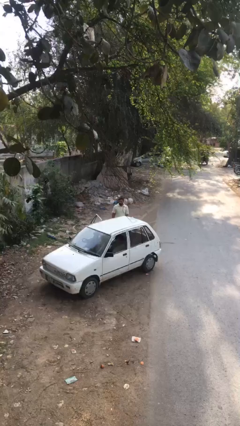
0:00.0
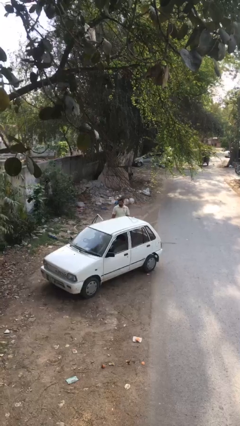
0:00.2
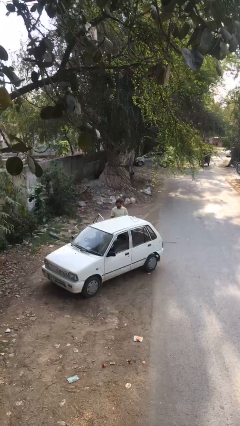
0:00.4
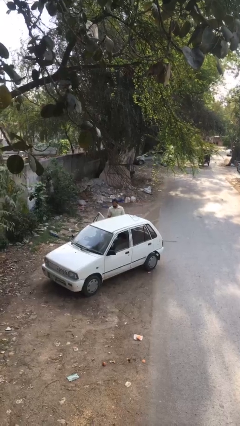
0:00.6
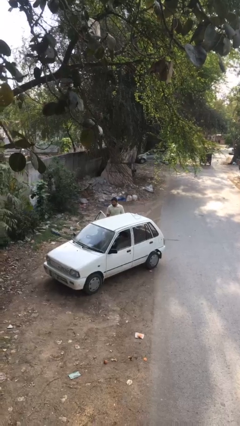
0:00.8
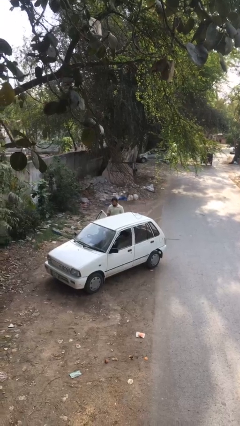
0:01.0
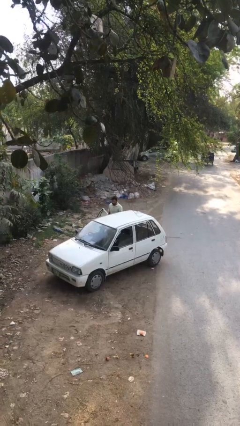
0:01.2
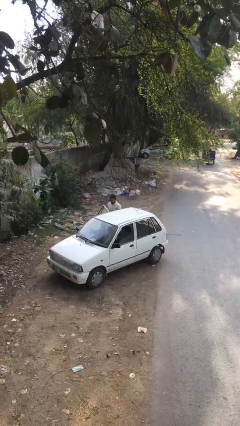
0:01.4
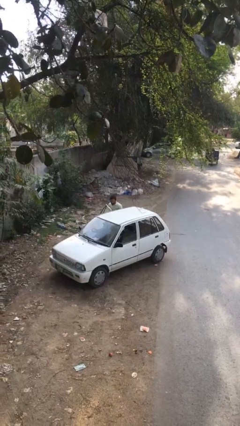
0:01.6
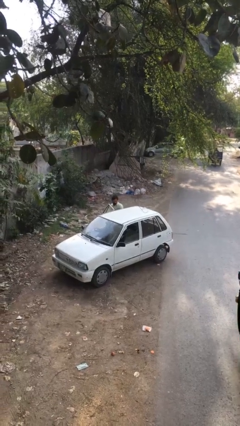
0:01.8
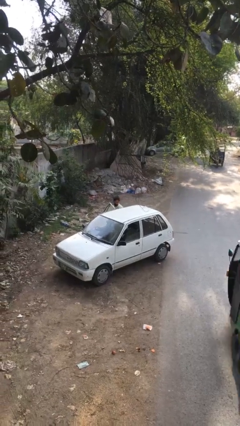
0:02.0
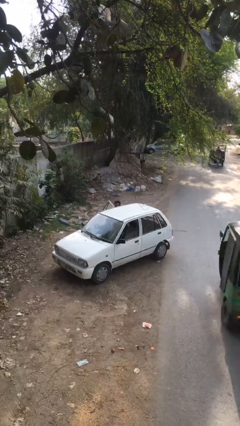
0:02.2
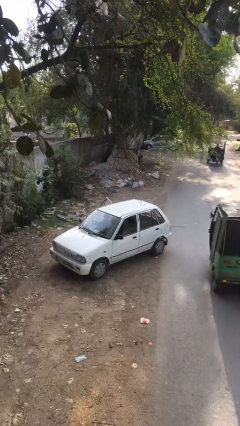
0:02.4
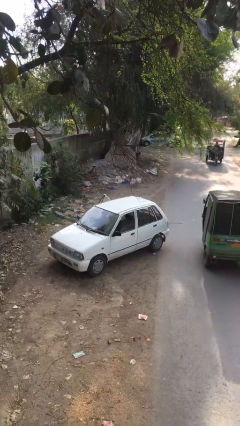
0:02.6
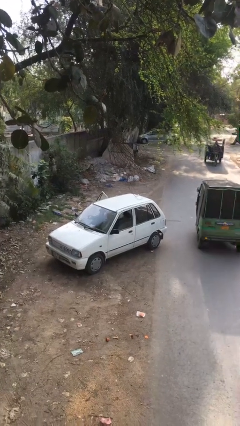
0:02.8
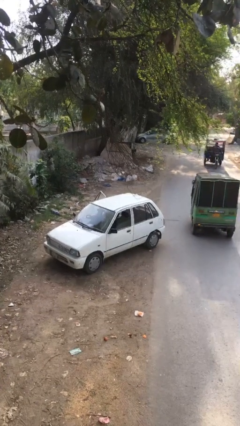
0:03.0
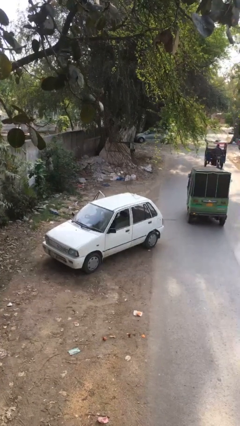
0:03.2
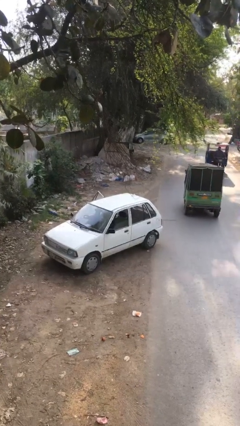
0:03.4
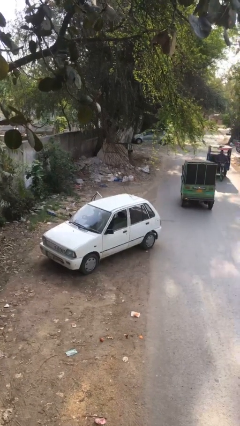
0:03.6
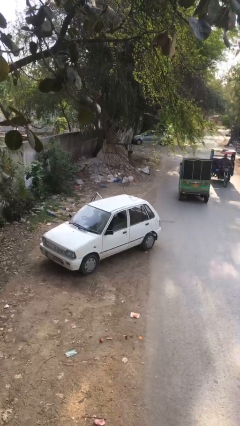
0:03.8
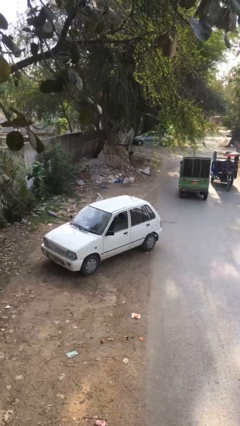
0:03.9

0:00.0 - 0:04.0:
person enters car

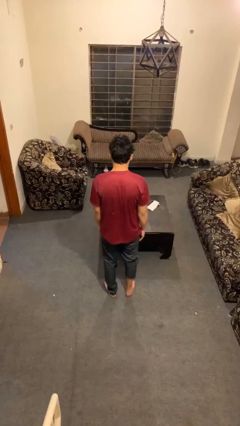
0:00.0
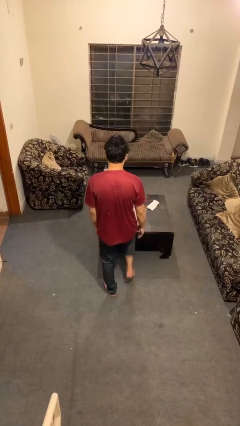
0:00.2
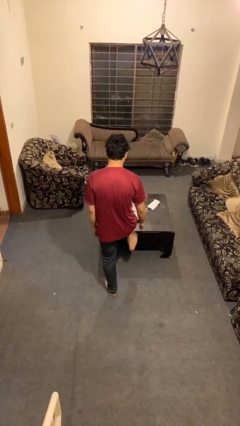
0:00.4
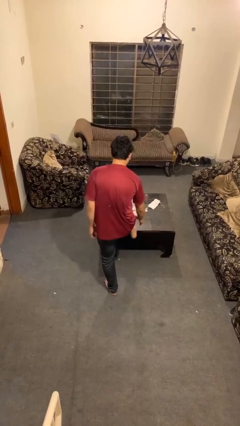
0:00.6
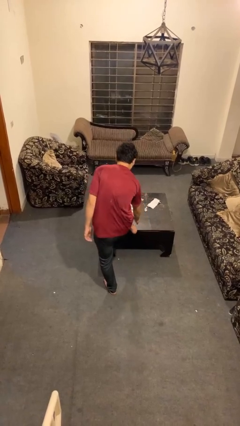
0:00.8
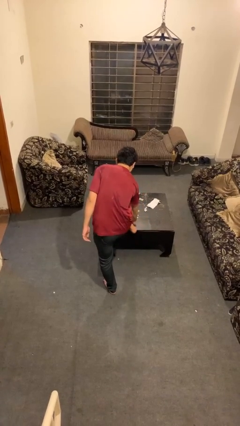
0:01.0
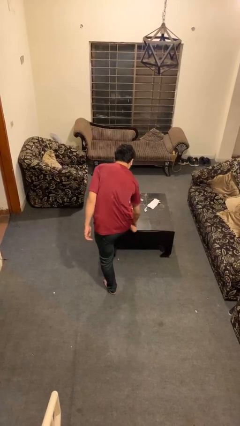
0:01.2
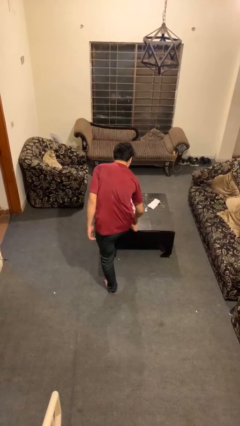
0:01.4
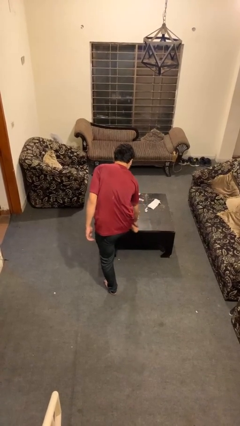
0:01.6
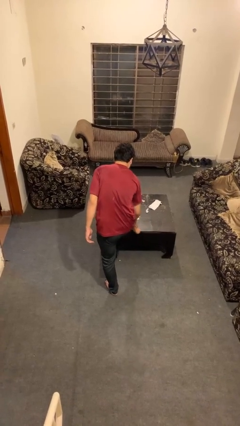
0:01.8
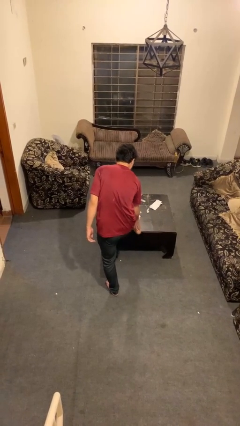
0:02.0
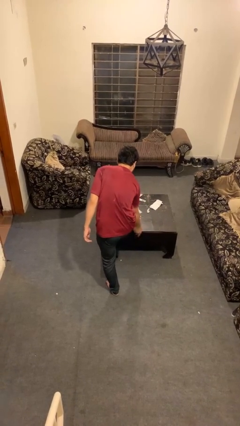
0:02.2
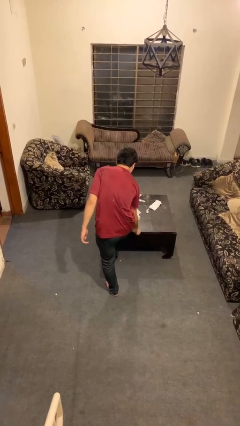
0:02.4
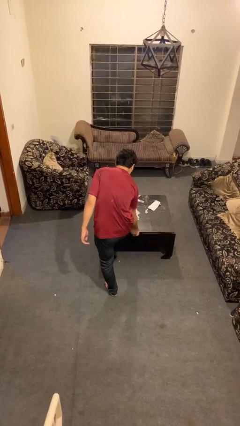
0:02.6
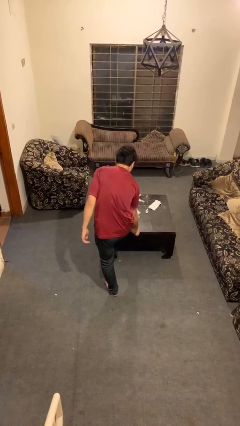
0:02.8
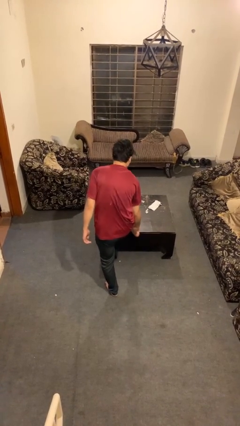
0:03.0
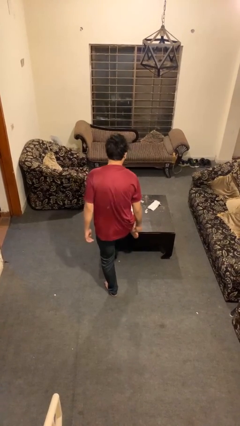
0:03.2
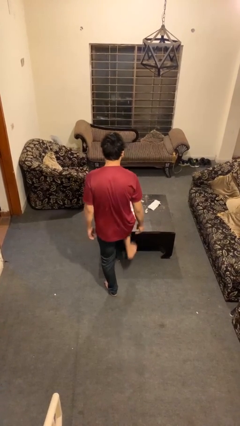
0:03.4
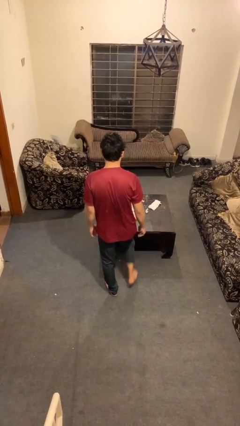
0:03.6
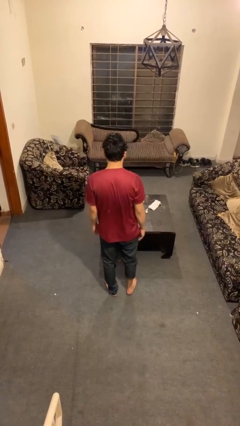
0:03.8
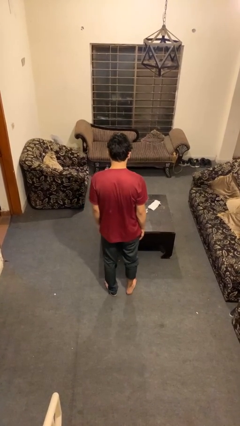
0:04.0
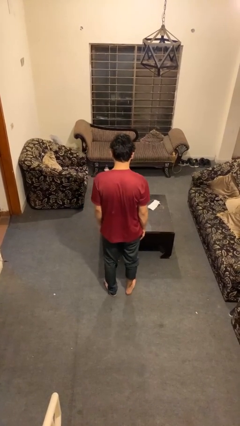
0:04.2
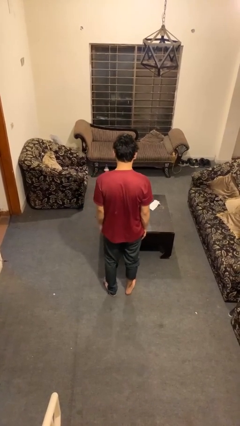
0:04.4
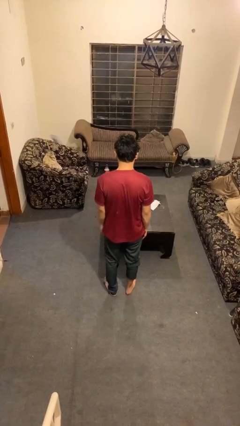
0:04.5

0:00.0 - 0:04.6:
person rubs foot

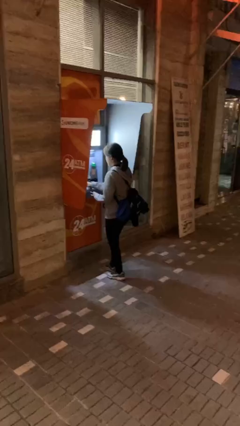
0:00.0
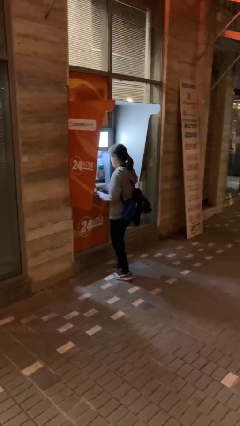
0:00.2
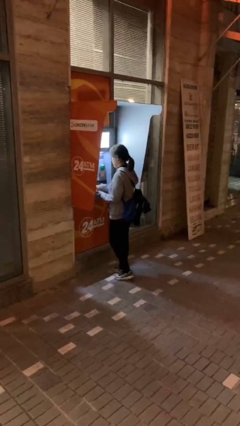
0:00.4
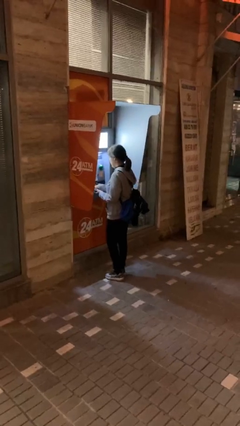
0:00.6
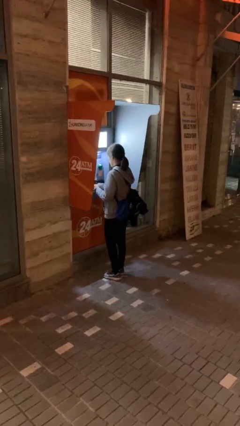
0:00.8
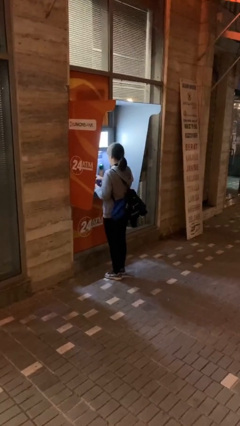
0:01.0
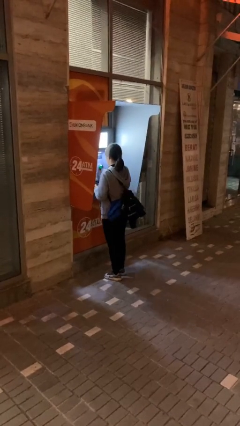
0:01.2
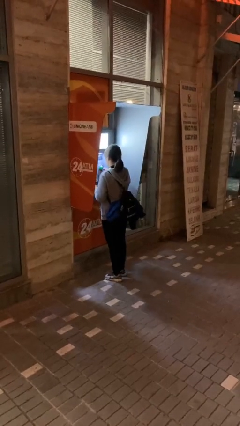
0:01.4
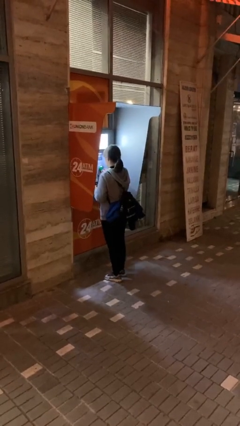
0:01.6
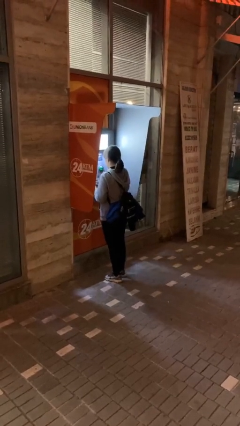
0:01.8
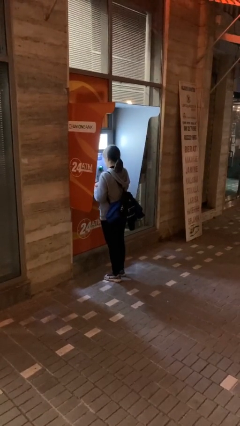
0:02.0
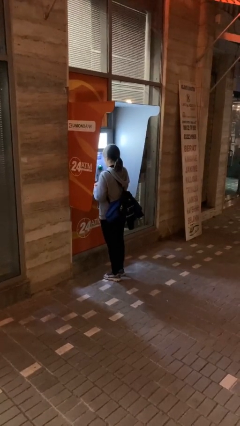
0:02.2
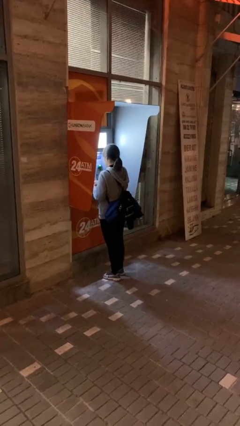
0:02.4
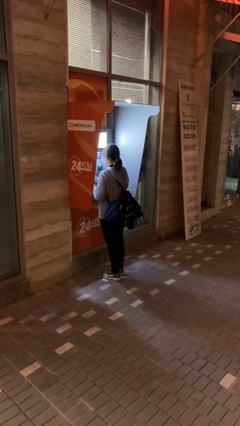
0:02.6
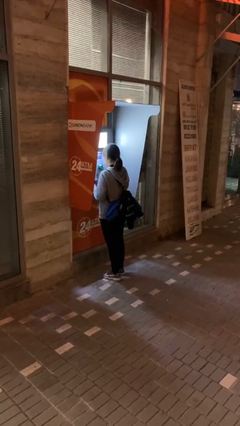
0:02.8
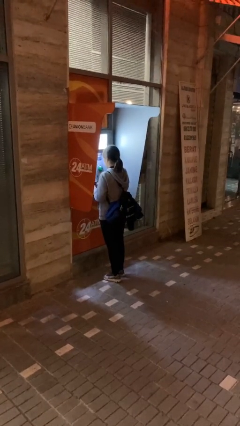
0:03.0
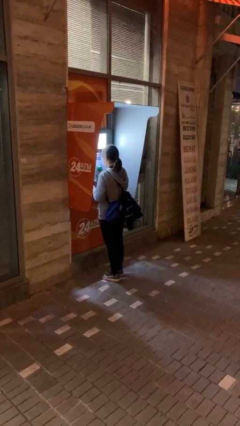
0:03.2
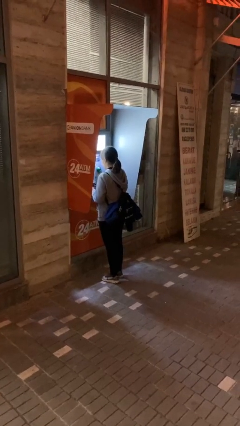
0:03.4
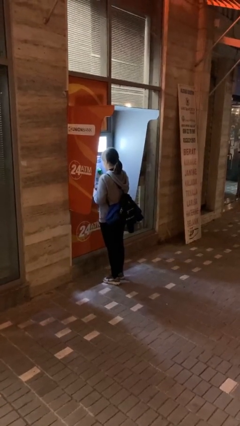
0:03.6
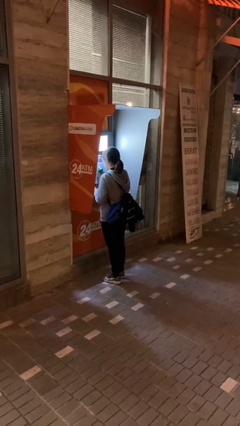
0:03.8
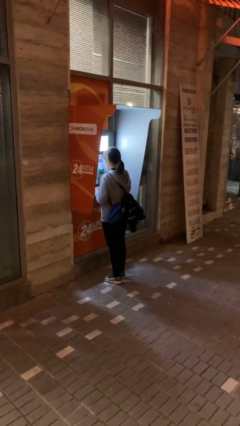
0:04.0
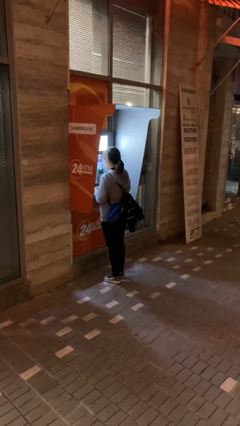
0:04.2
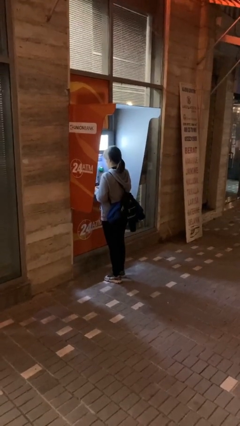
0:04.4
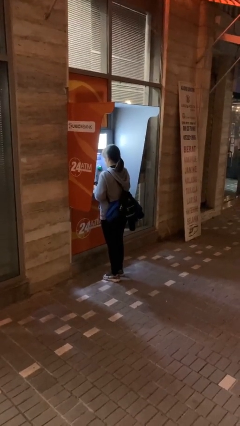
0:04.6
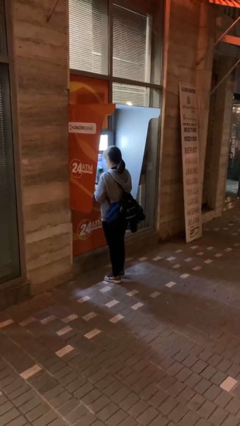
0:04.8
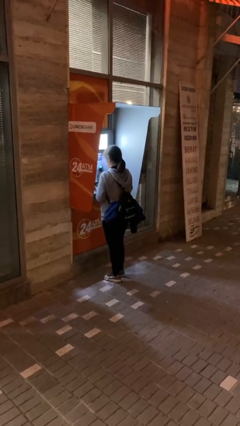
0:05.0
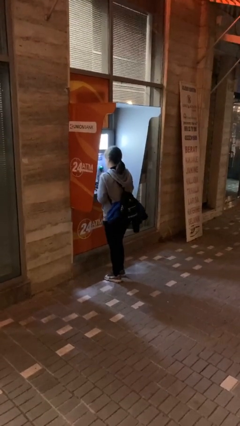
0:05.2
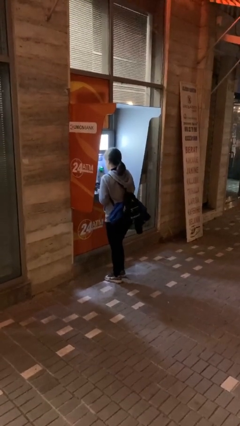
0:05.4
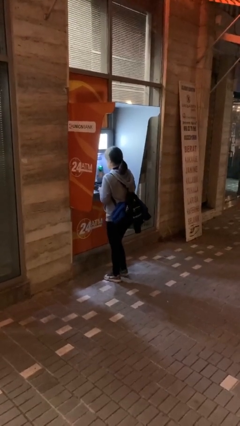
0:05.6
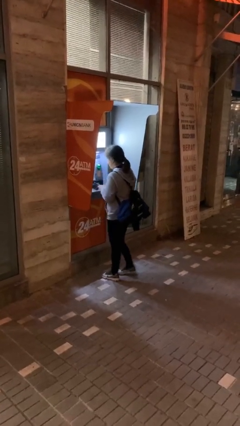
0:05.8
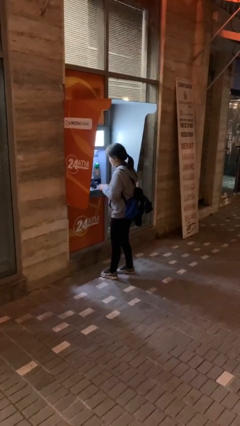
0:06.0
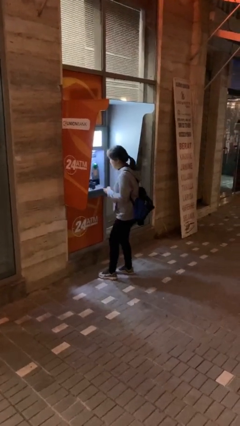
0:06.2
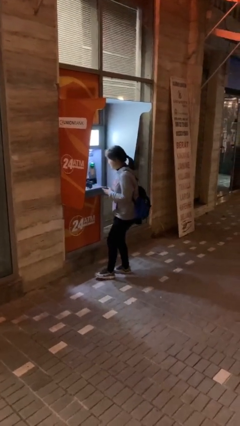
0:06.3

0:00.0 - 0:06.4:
person purchases from machine

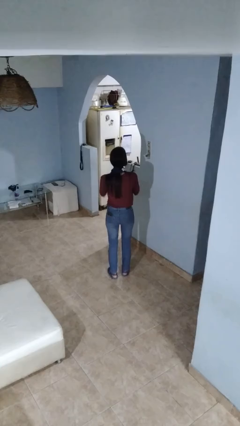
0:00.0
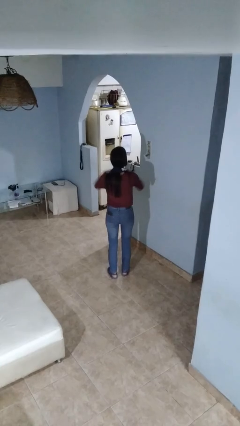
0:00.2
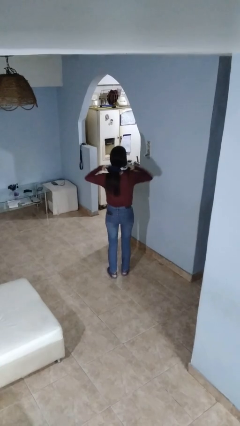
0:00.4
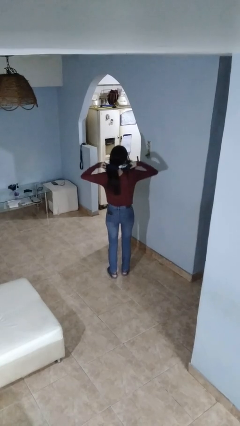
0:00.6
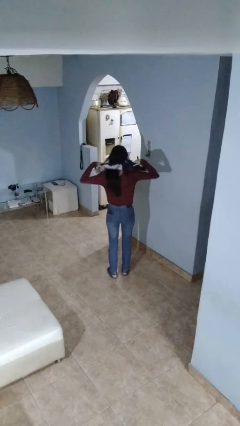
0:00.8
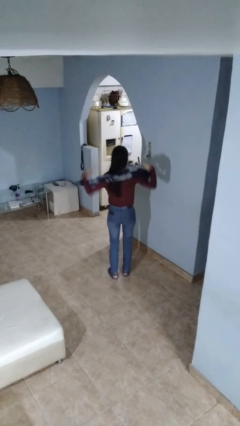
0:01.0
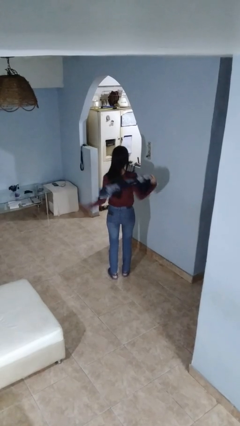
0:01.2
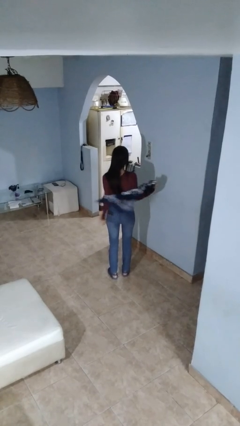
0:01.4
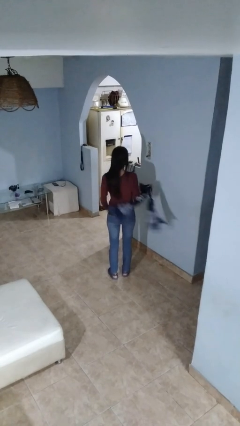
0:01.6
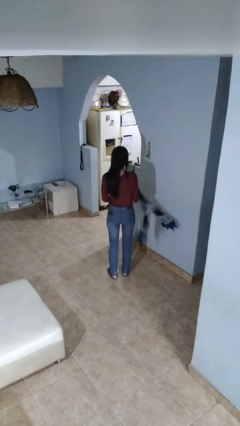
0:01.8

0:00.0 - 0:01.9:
person takes off scarf

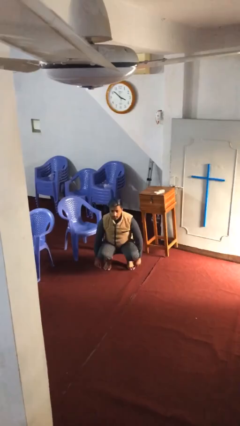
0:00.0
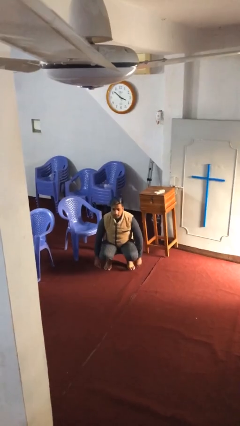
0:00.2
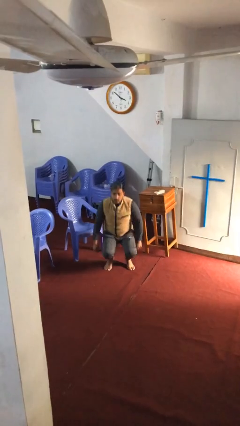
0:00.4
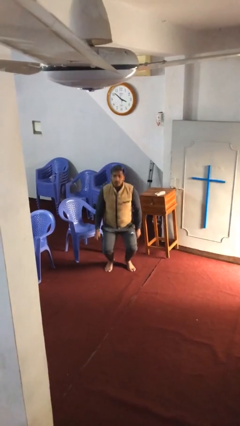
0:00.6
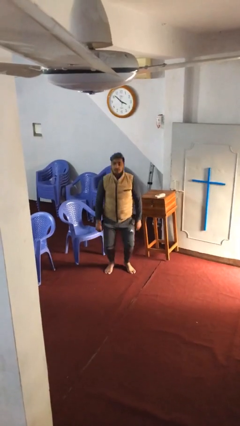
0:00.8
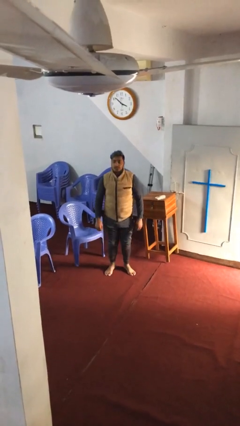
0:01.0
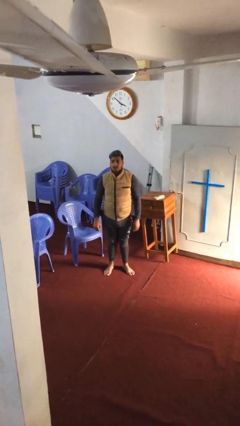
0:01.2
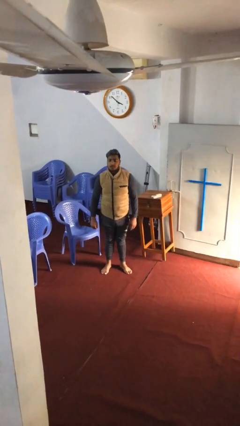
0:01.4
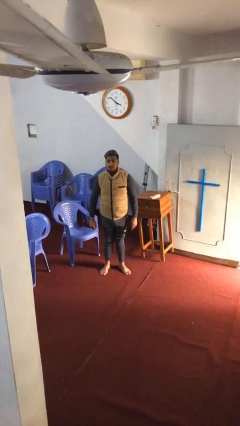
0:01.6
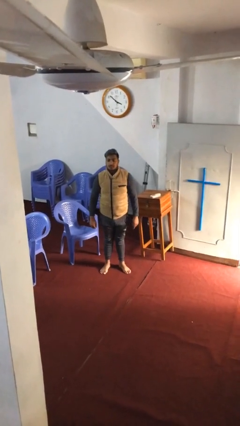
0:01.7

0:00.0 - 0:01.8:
person stands up
